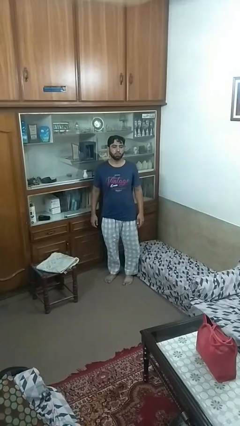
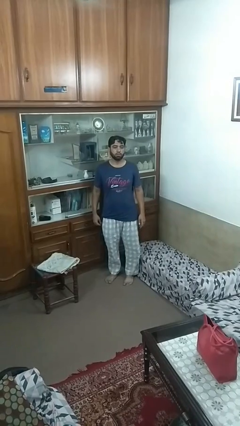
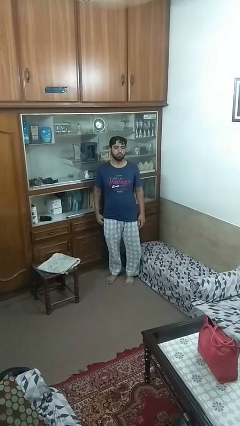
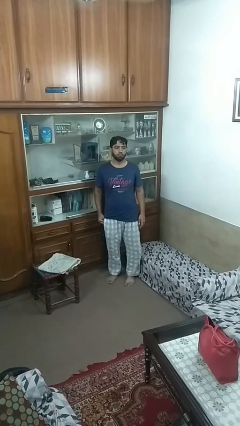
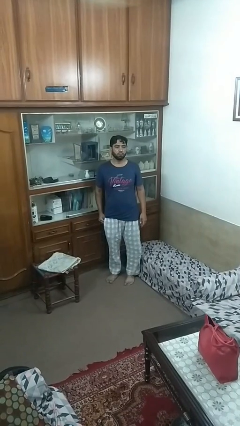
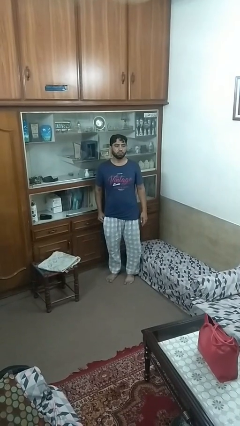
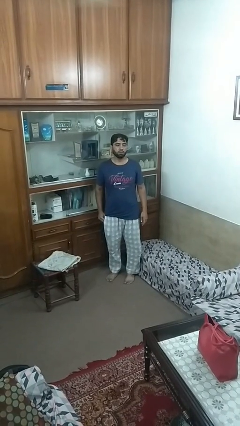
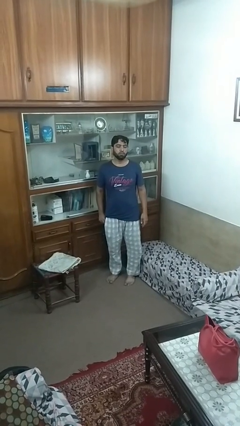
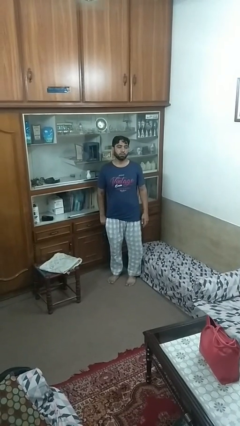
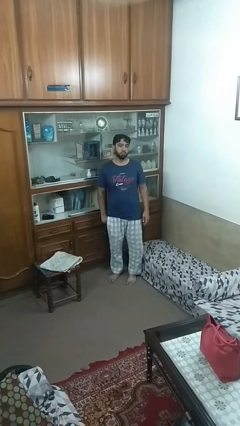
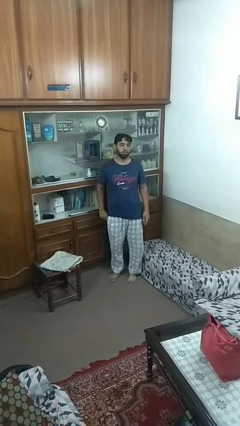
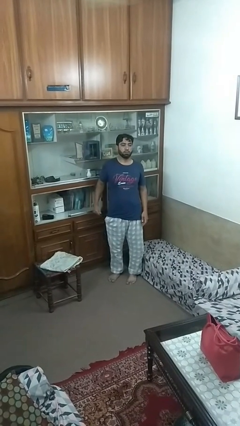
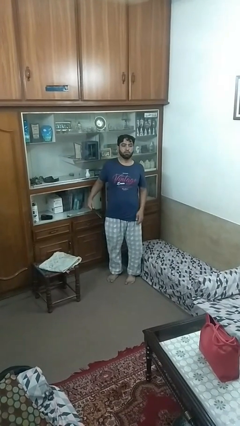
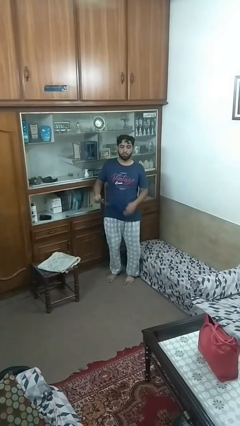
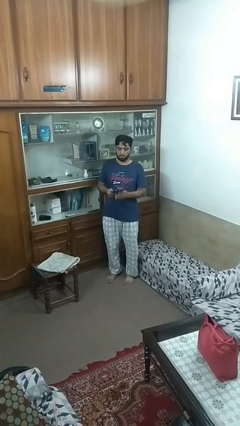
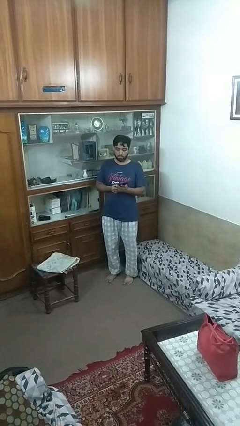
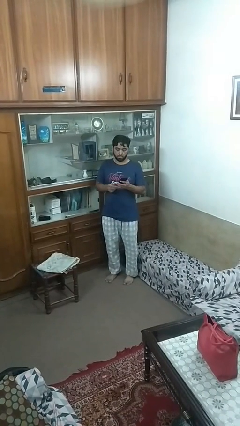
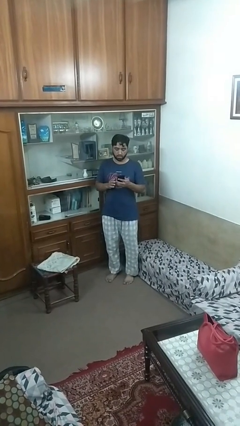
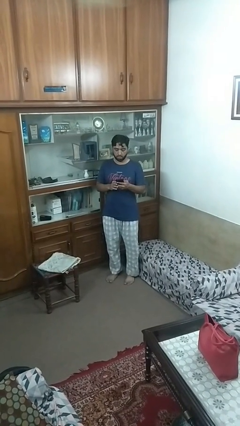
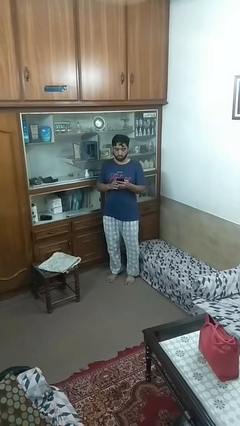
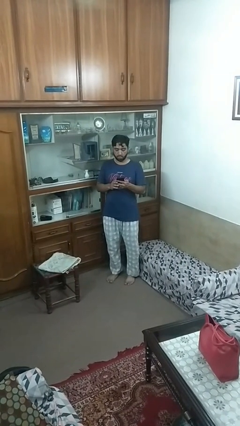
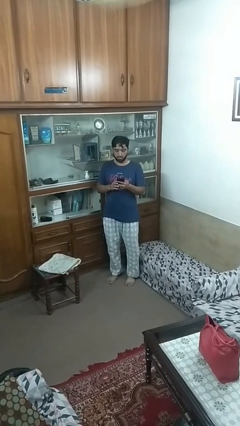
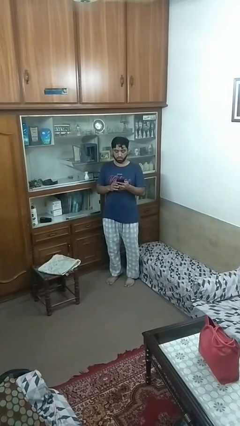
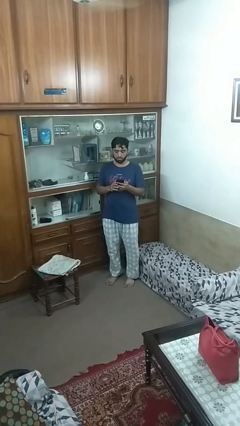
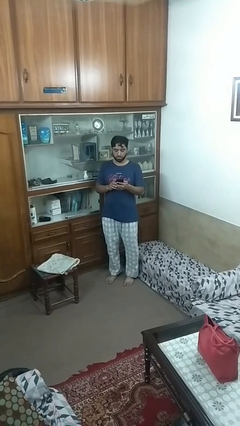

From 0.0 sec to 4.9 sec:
person takes phone from pocket

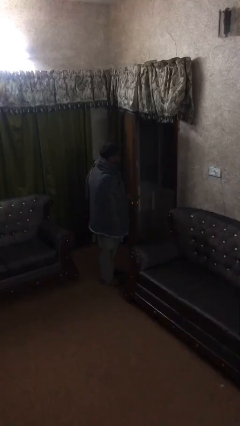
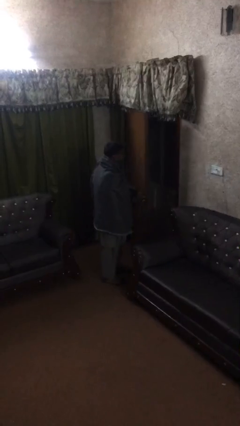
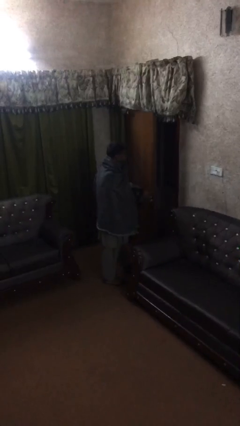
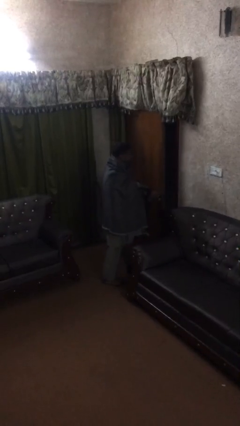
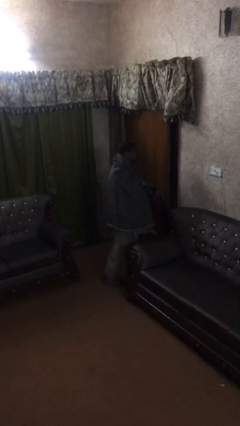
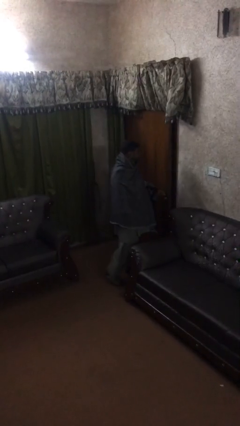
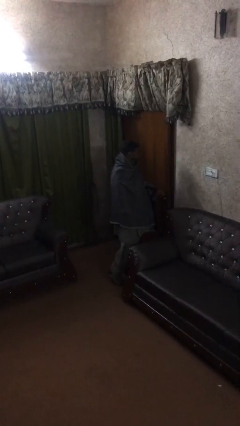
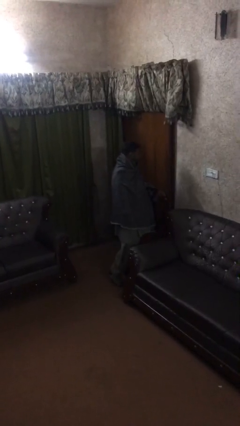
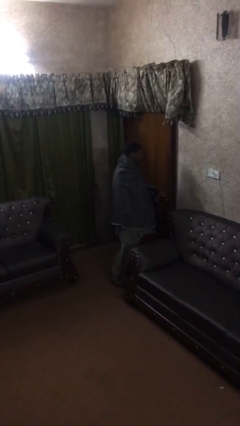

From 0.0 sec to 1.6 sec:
person closes facility door

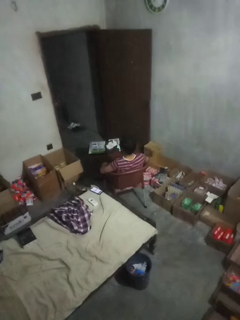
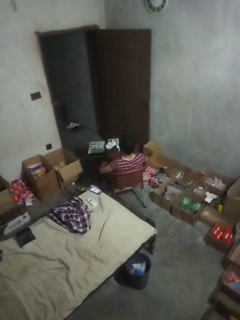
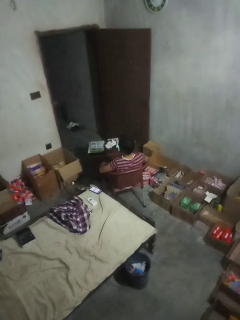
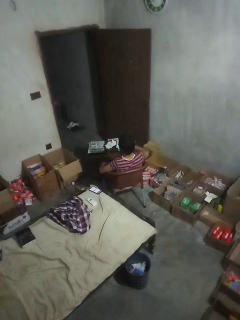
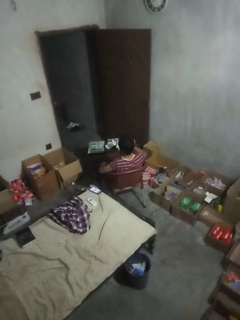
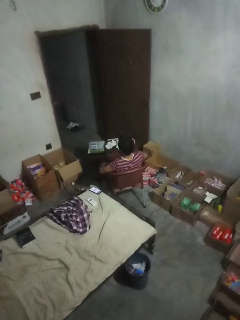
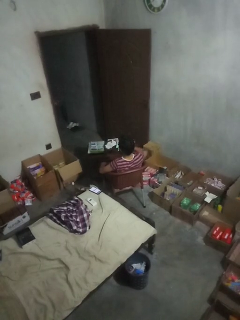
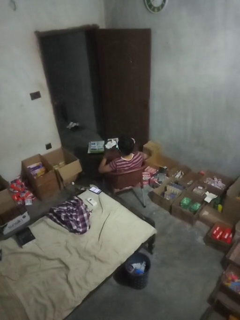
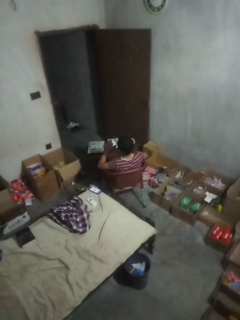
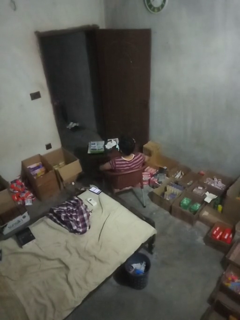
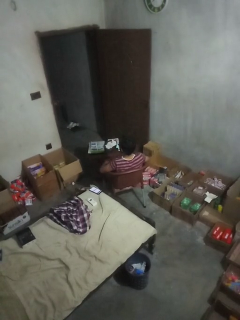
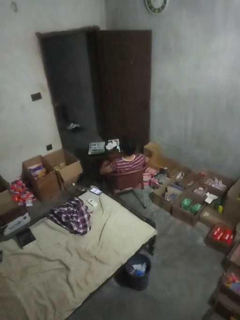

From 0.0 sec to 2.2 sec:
person slaps hands on thighs

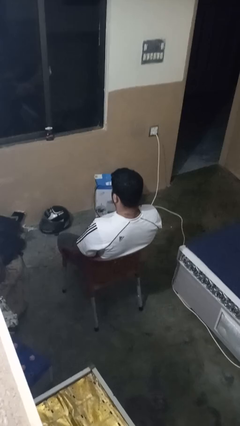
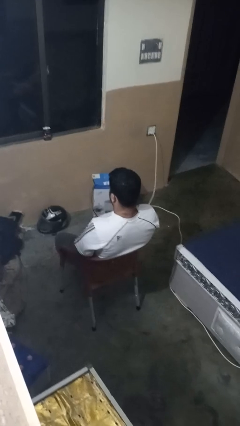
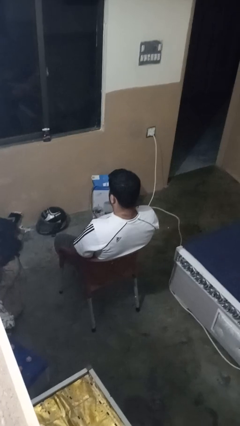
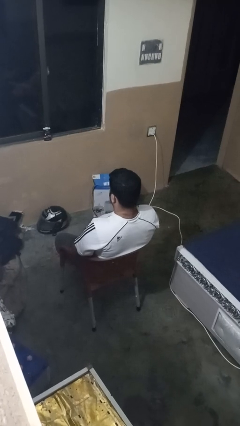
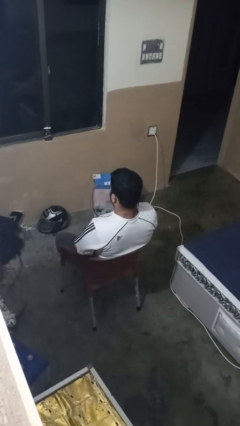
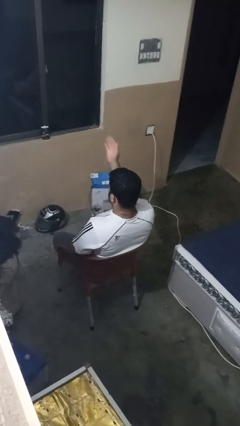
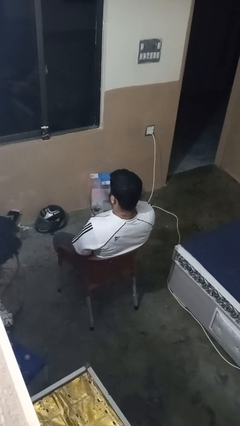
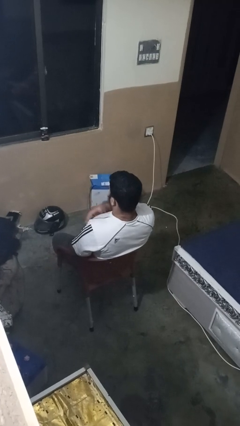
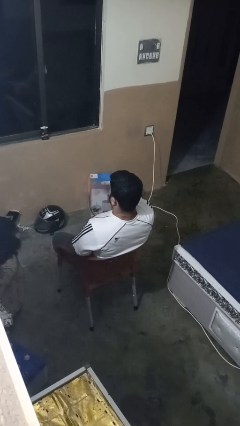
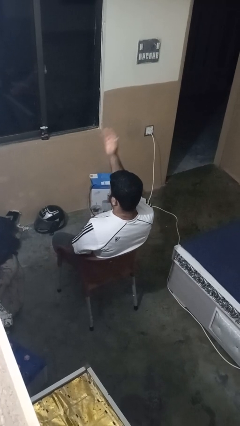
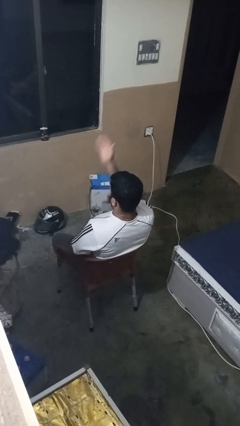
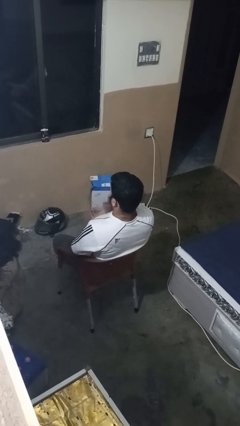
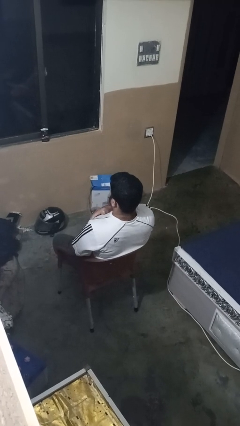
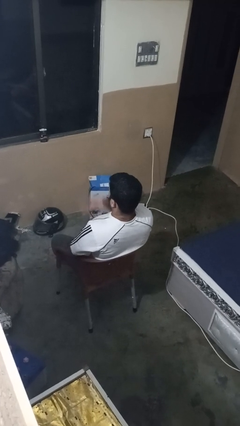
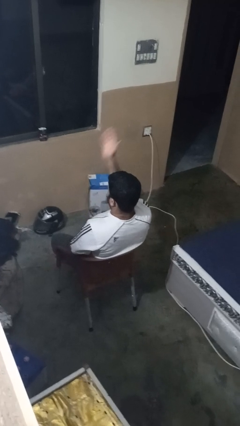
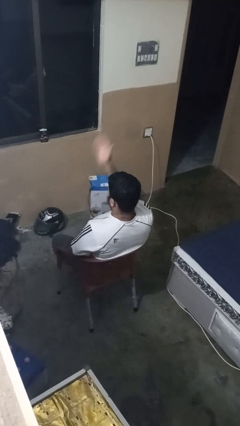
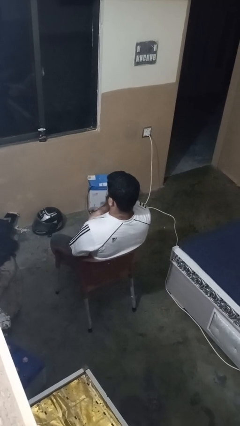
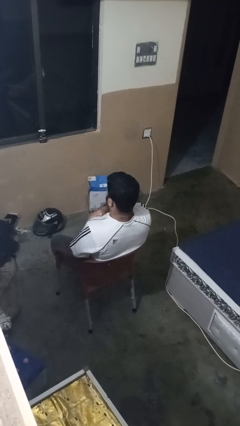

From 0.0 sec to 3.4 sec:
person drums on chest

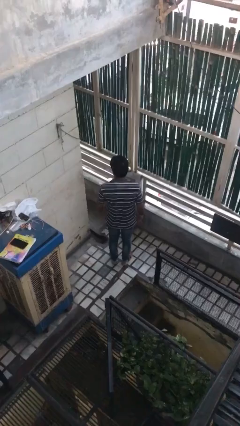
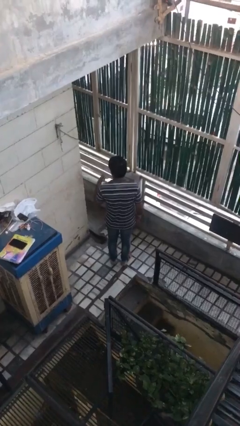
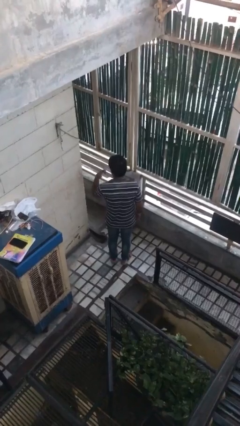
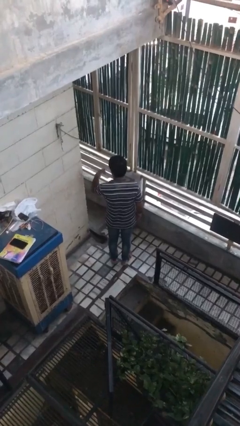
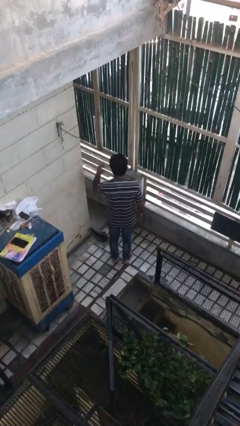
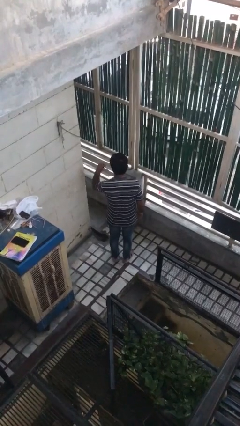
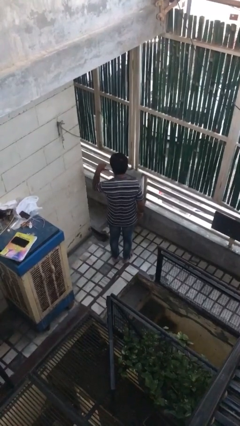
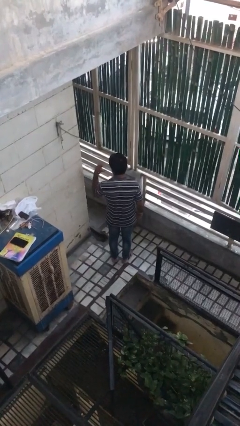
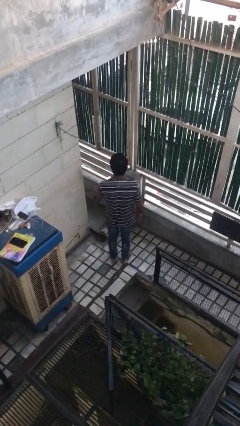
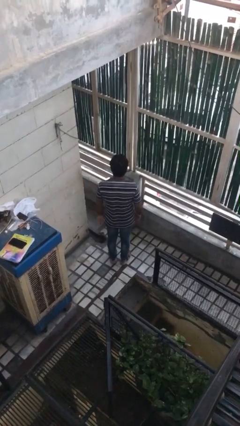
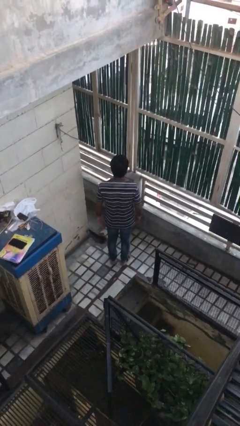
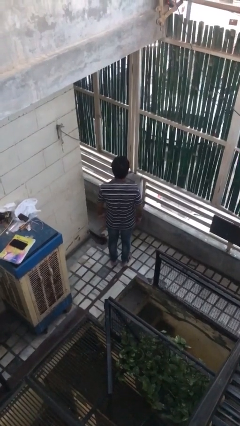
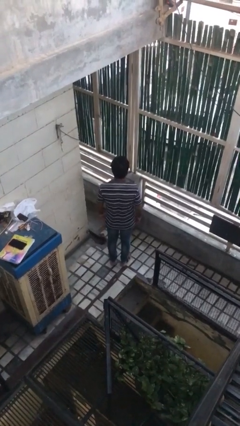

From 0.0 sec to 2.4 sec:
person gestures behind me

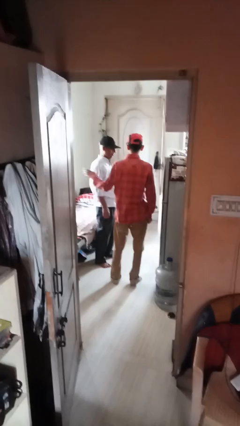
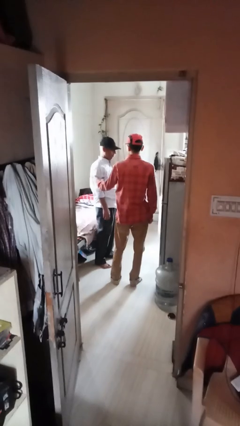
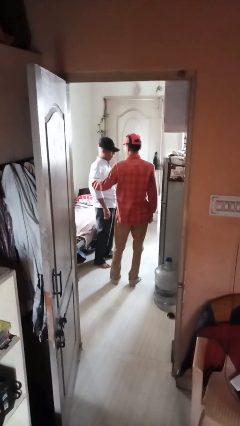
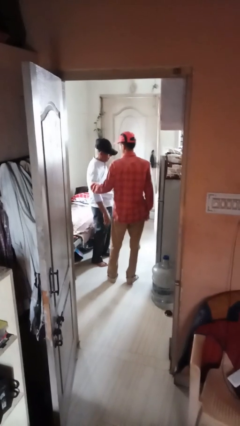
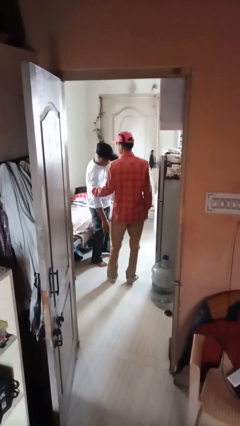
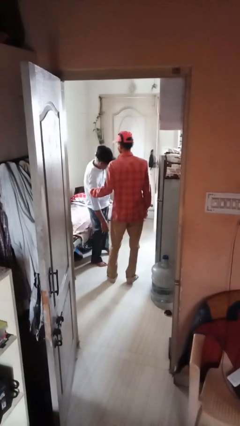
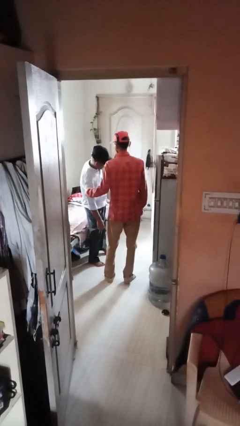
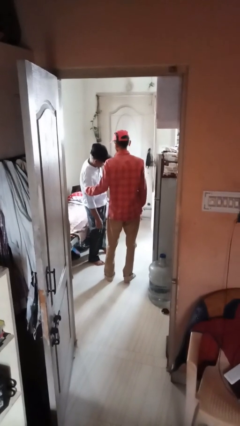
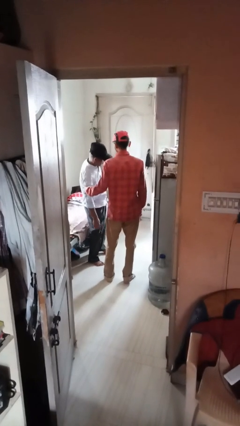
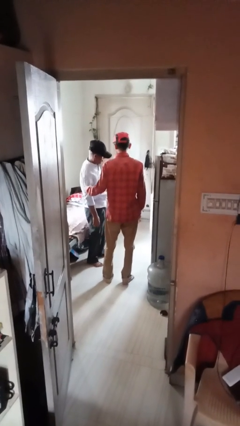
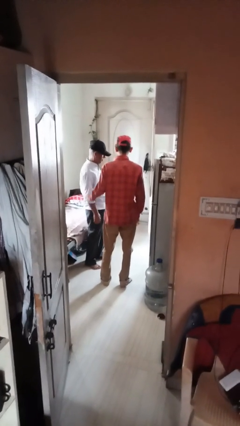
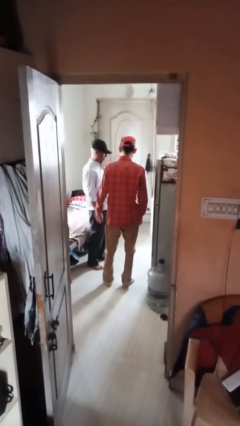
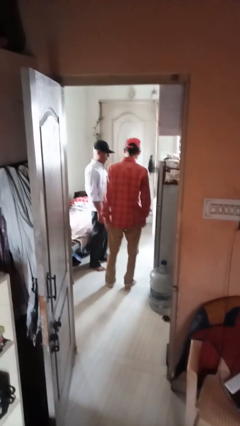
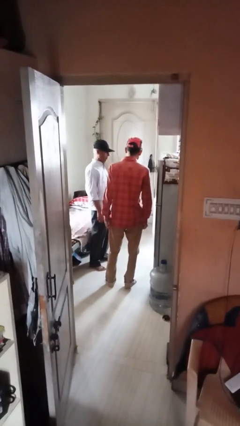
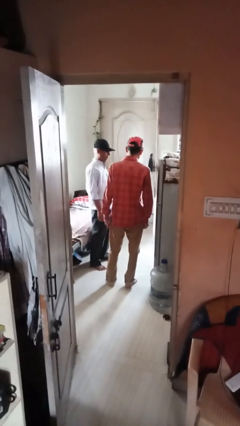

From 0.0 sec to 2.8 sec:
person grabs person by bicep
